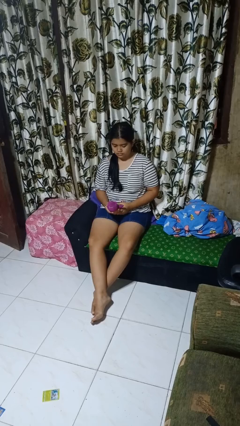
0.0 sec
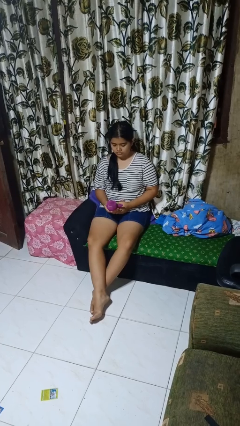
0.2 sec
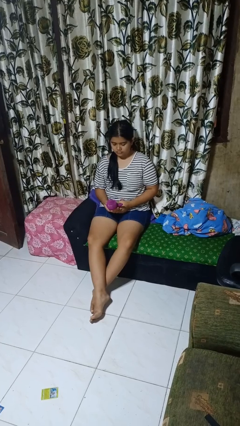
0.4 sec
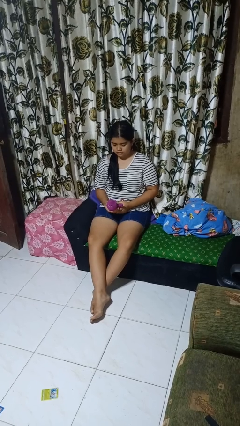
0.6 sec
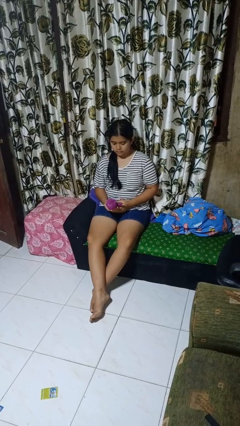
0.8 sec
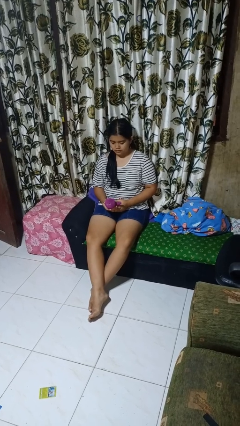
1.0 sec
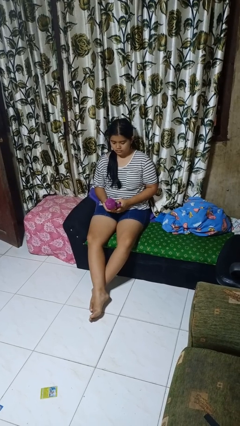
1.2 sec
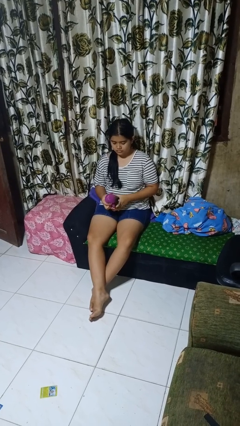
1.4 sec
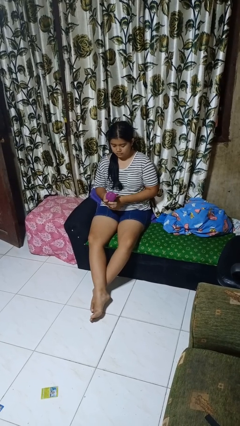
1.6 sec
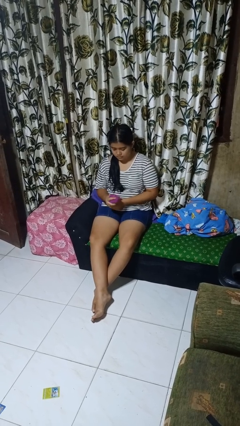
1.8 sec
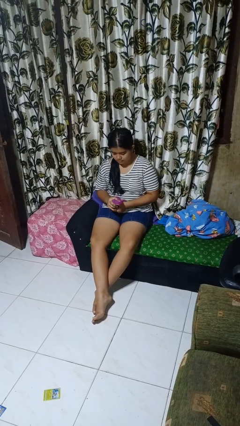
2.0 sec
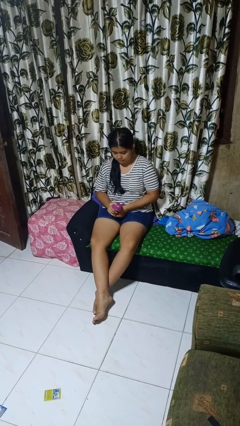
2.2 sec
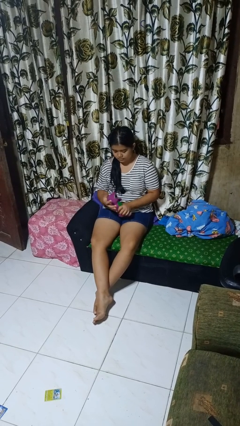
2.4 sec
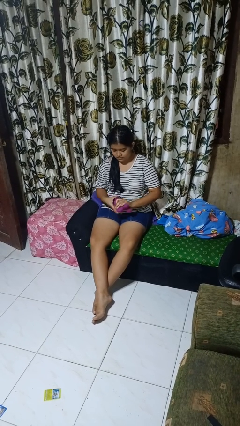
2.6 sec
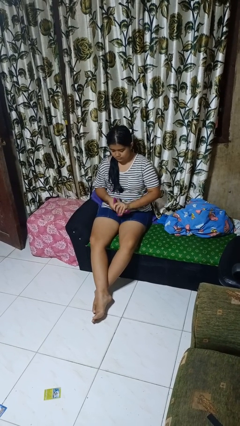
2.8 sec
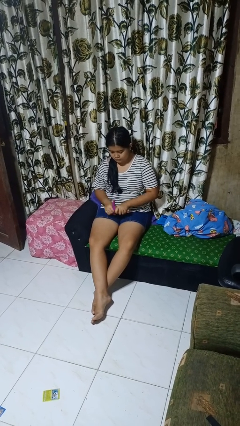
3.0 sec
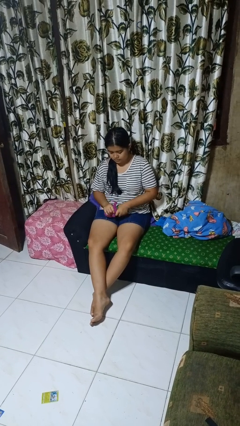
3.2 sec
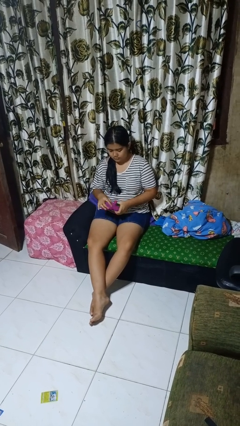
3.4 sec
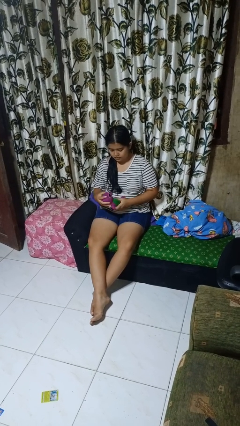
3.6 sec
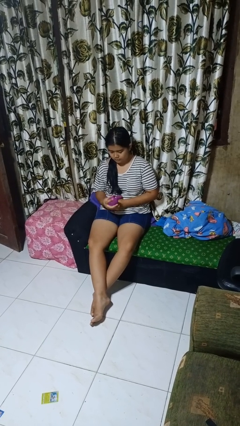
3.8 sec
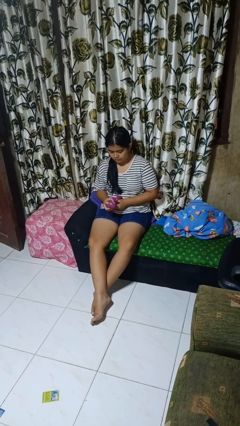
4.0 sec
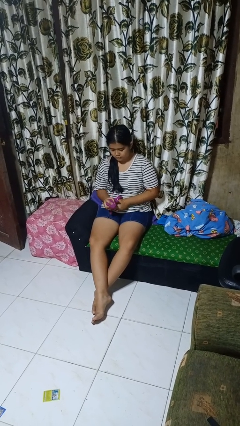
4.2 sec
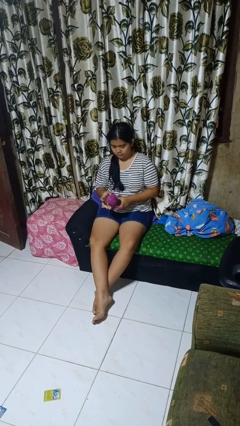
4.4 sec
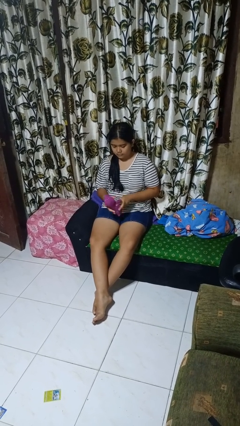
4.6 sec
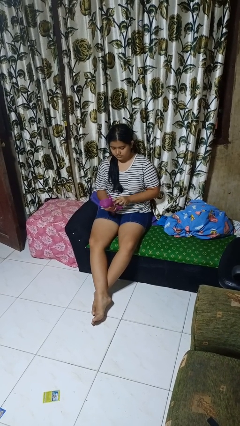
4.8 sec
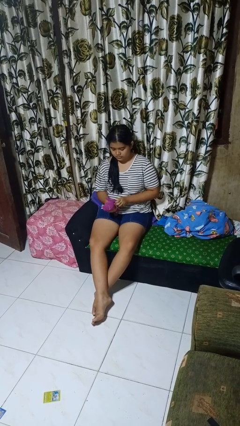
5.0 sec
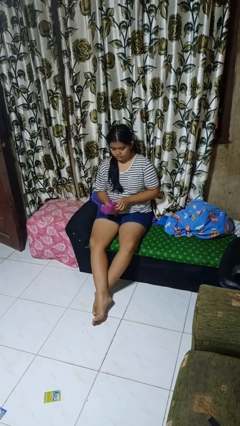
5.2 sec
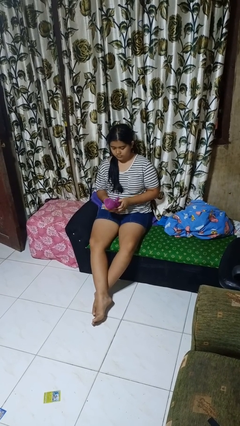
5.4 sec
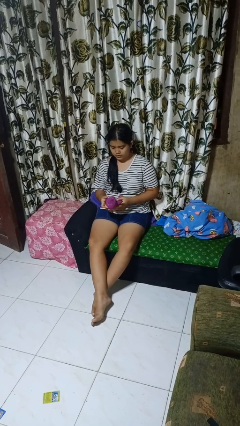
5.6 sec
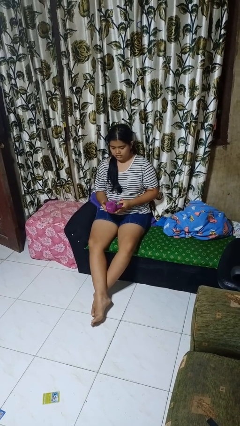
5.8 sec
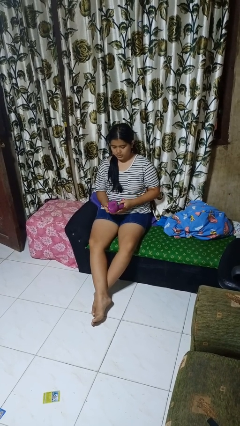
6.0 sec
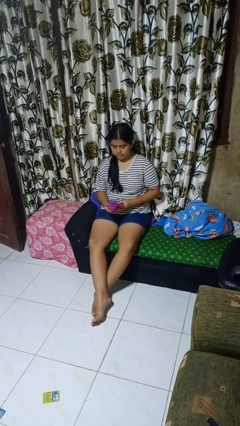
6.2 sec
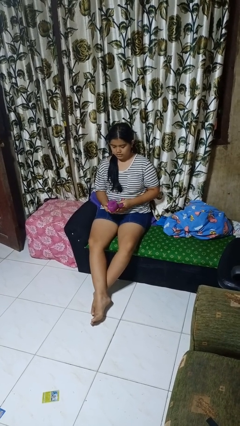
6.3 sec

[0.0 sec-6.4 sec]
person squeezes object

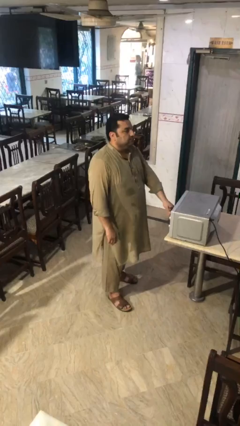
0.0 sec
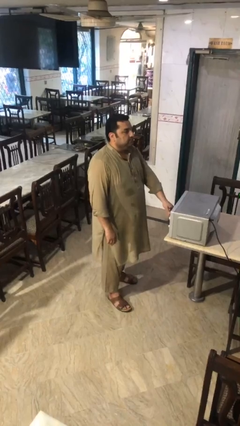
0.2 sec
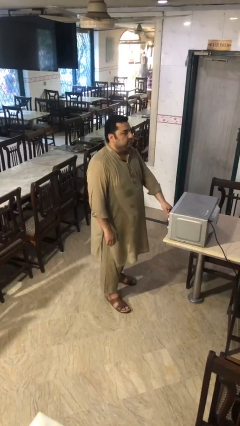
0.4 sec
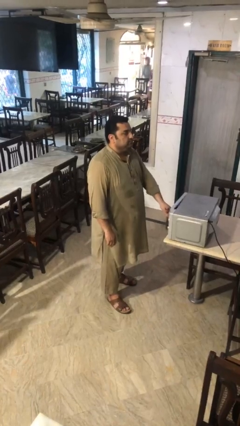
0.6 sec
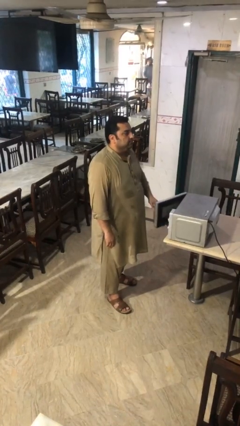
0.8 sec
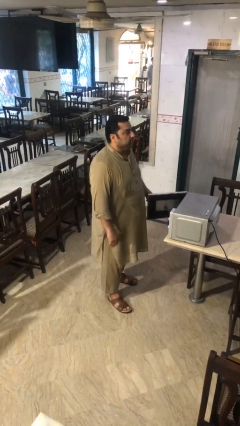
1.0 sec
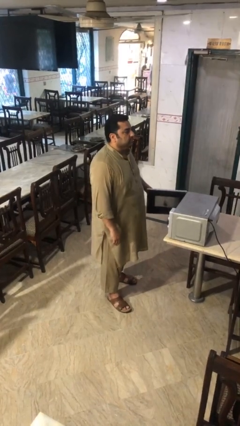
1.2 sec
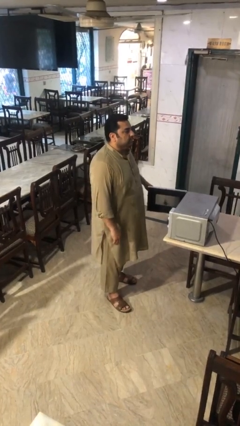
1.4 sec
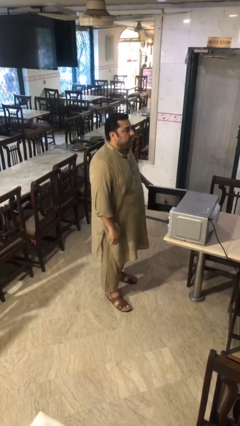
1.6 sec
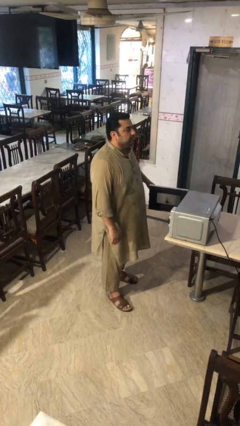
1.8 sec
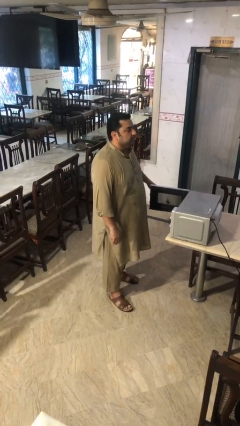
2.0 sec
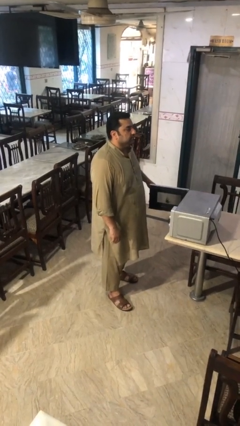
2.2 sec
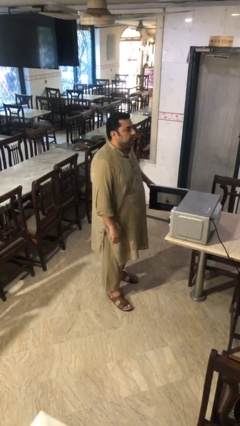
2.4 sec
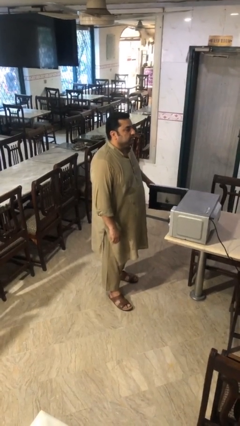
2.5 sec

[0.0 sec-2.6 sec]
person opens microwave

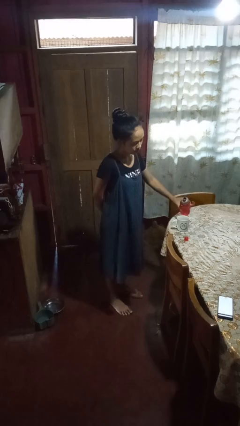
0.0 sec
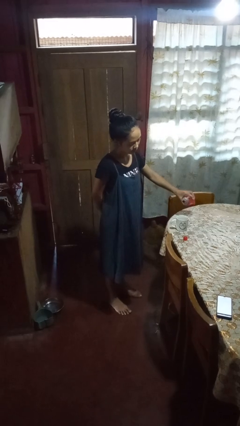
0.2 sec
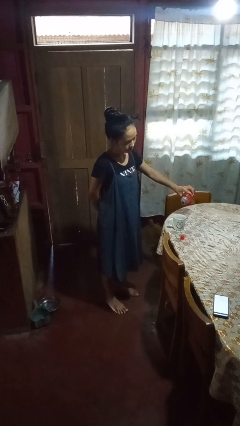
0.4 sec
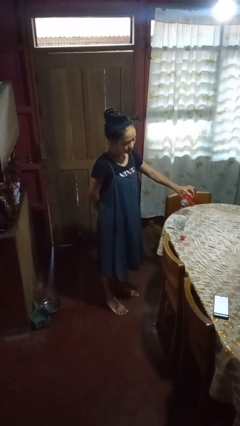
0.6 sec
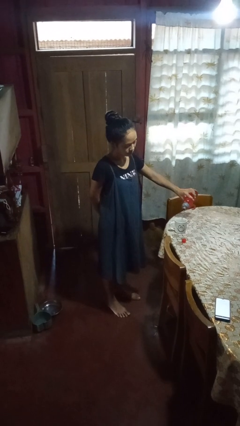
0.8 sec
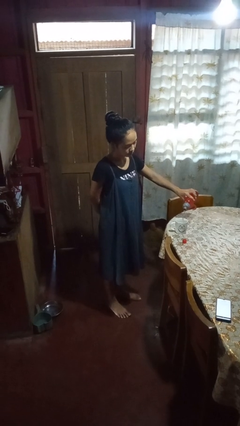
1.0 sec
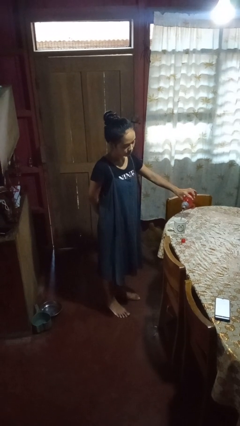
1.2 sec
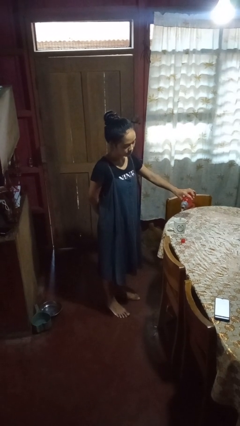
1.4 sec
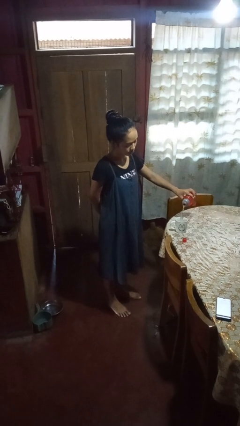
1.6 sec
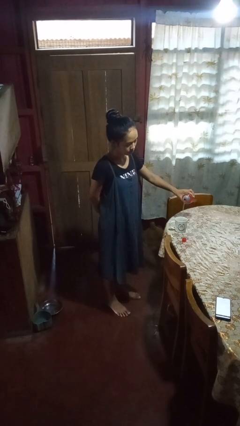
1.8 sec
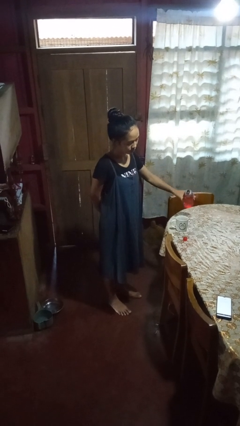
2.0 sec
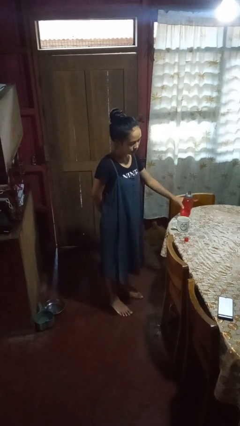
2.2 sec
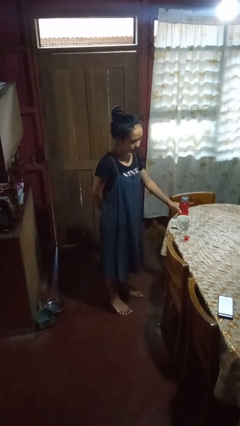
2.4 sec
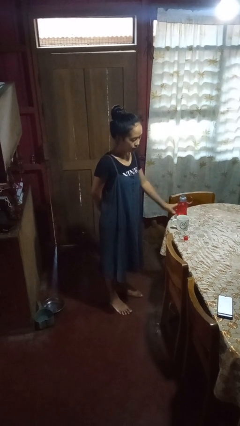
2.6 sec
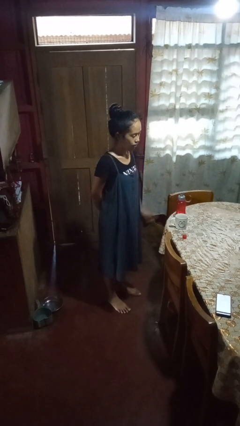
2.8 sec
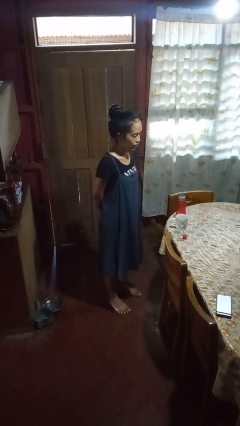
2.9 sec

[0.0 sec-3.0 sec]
person pours liquid into cup

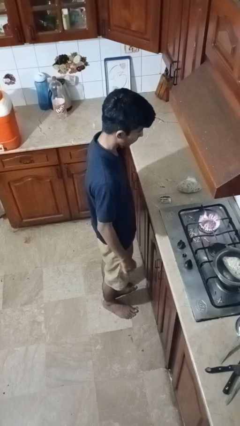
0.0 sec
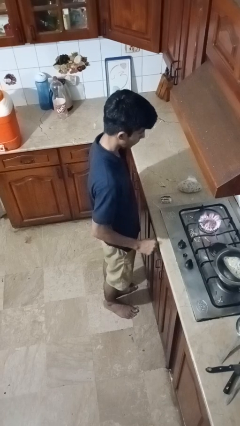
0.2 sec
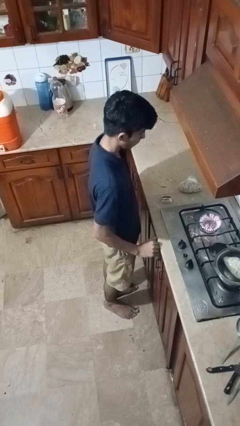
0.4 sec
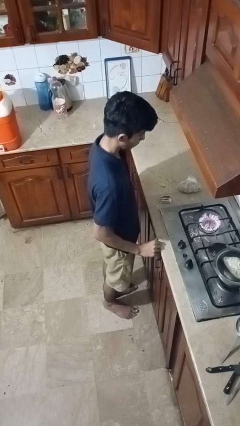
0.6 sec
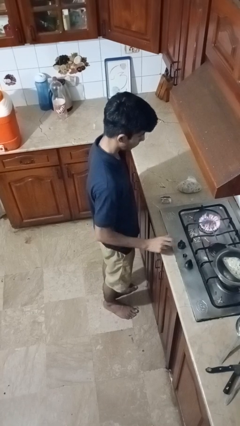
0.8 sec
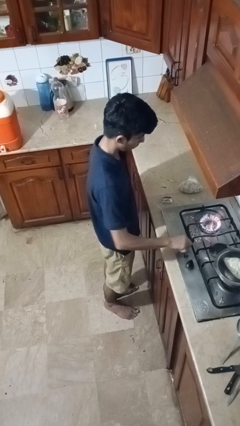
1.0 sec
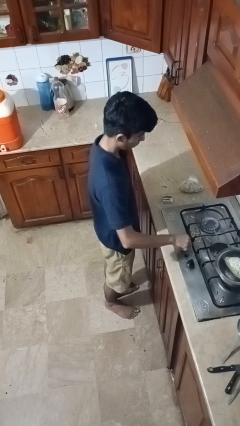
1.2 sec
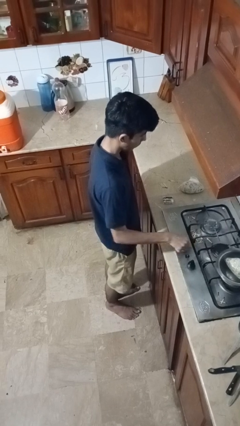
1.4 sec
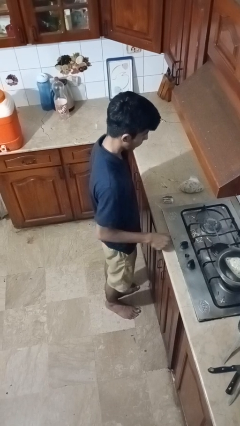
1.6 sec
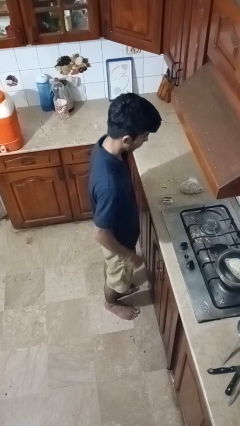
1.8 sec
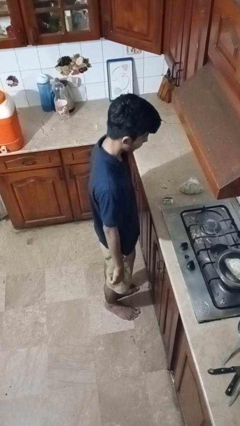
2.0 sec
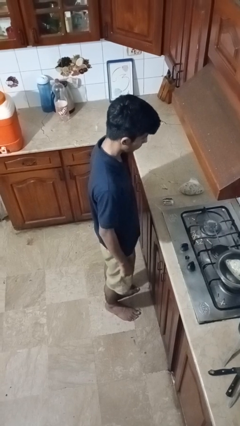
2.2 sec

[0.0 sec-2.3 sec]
person turns off stovetop

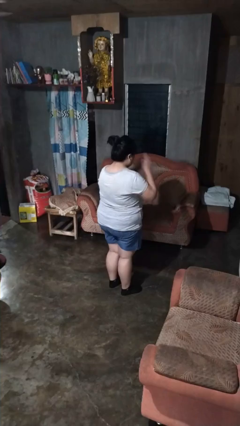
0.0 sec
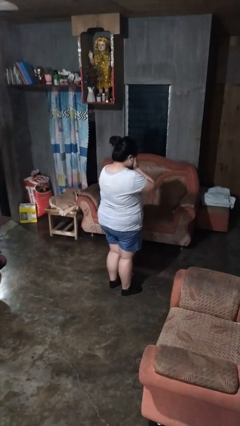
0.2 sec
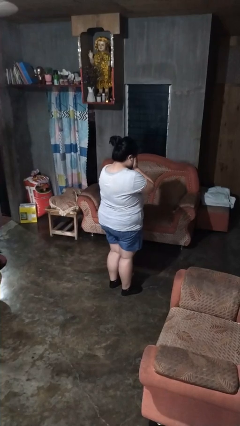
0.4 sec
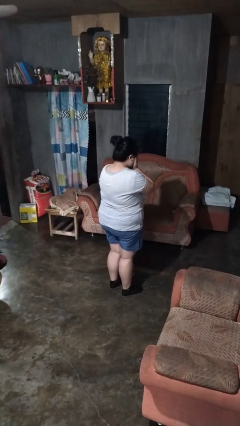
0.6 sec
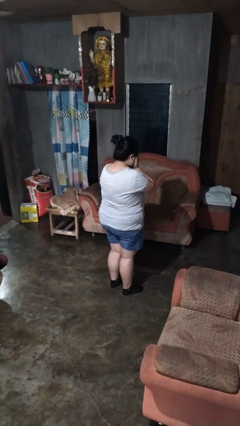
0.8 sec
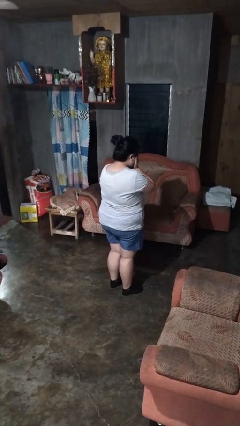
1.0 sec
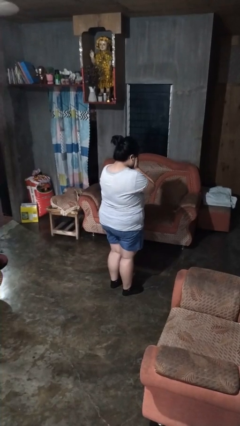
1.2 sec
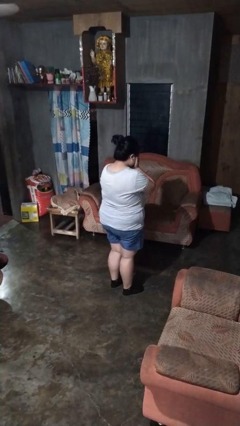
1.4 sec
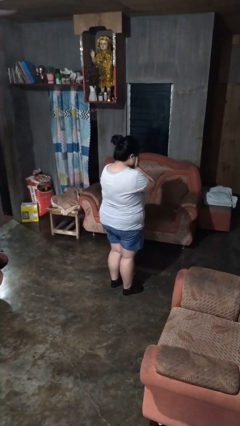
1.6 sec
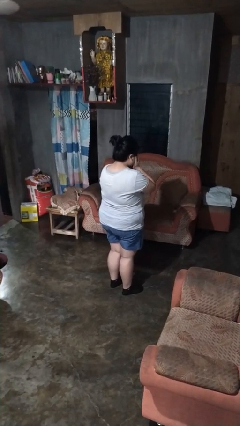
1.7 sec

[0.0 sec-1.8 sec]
person covers face with hands

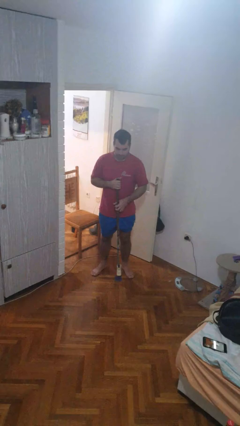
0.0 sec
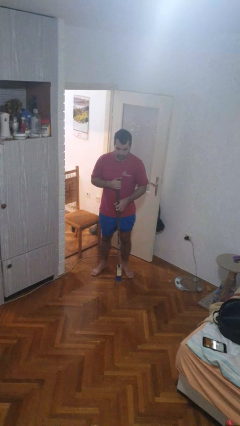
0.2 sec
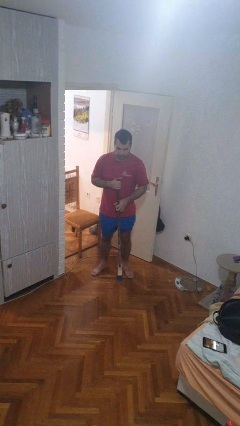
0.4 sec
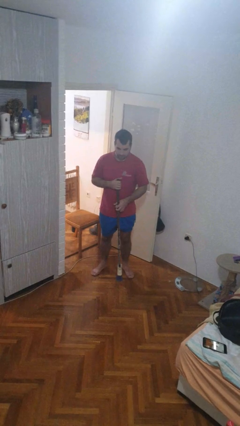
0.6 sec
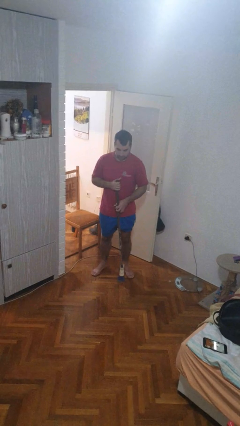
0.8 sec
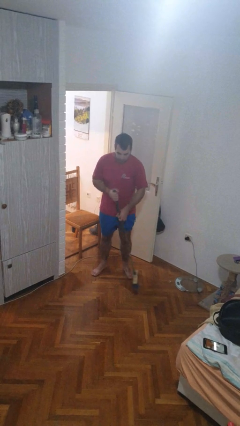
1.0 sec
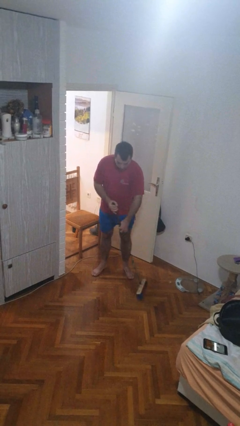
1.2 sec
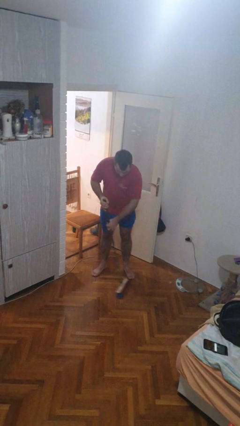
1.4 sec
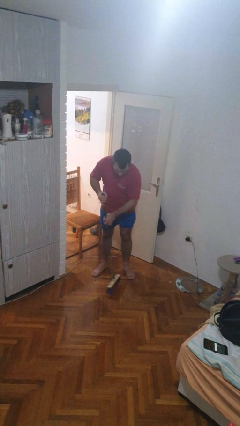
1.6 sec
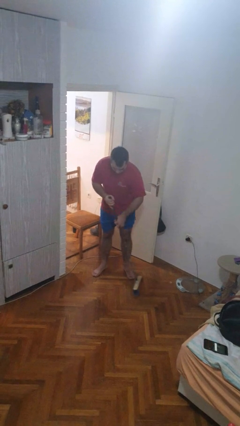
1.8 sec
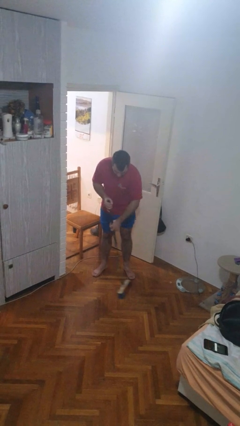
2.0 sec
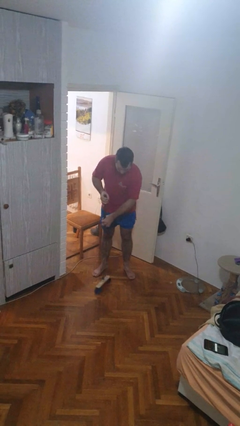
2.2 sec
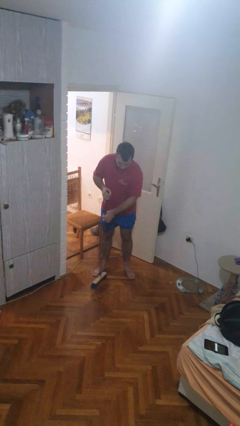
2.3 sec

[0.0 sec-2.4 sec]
person sweeps floor
